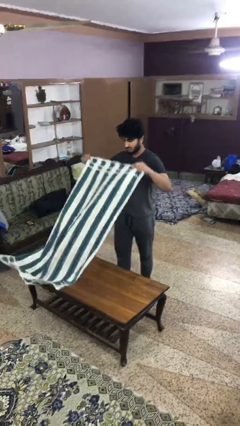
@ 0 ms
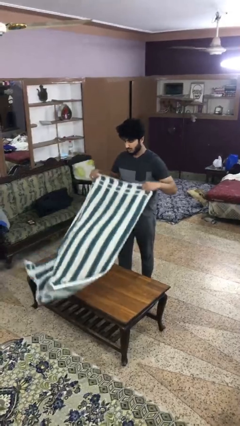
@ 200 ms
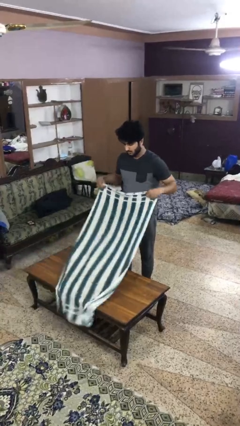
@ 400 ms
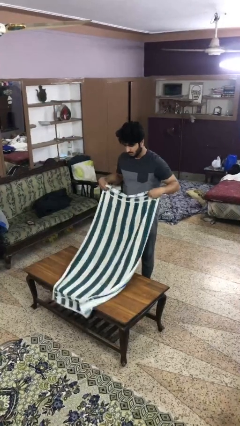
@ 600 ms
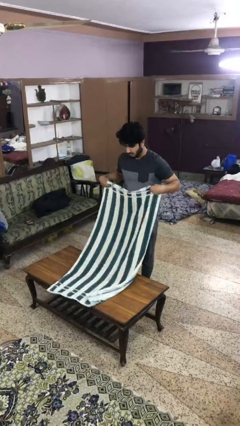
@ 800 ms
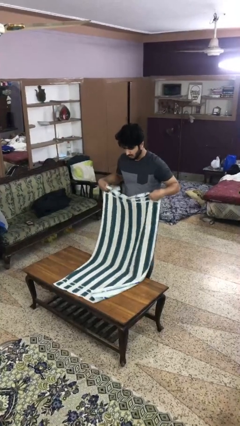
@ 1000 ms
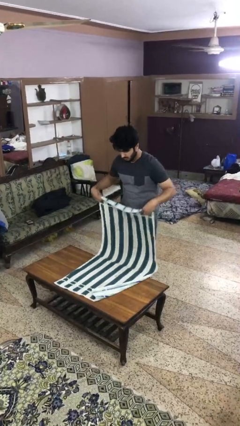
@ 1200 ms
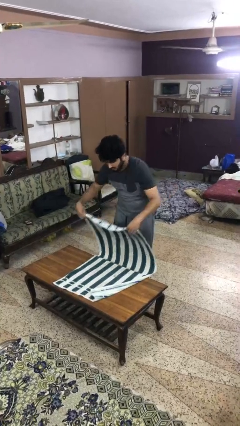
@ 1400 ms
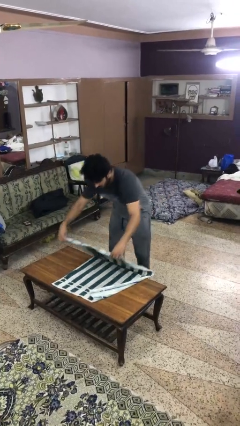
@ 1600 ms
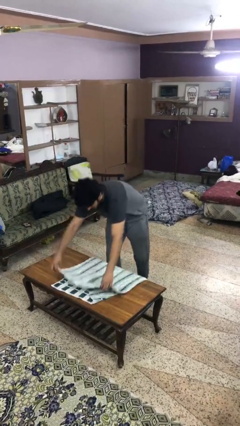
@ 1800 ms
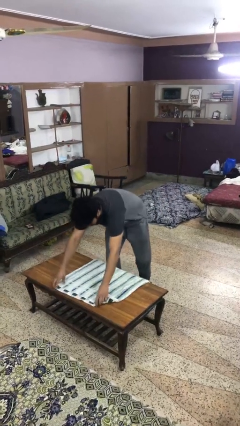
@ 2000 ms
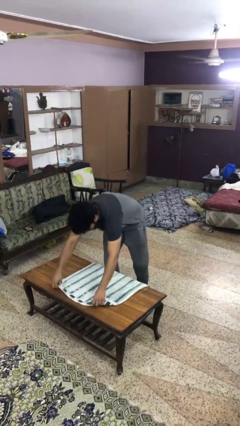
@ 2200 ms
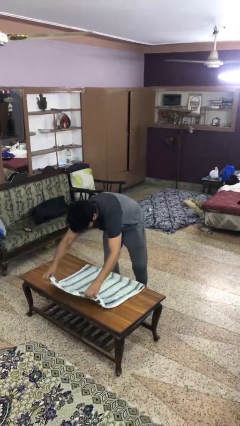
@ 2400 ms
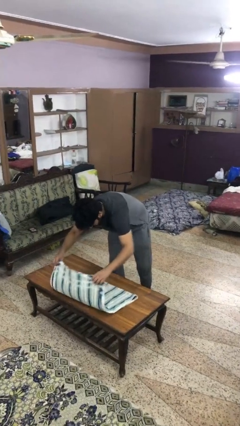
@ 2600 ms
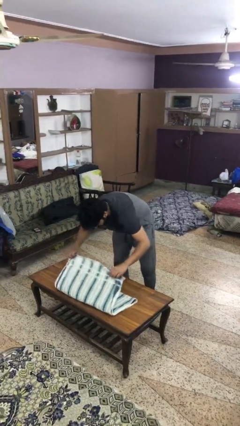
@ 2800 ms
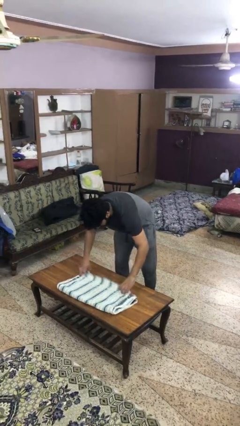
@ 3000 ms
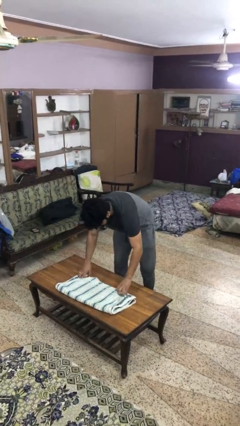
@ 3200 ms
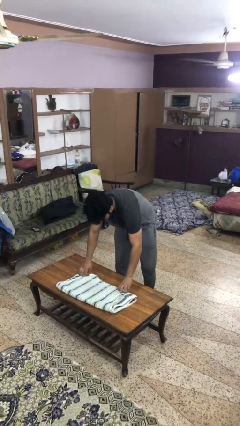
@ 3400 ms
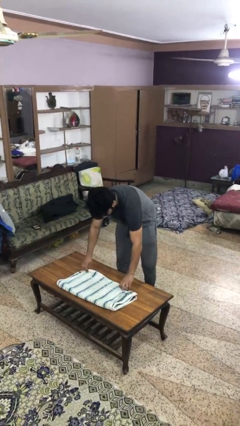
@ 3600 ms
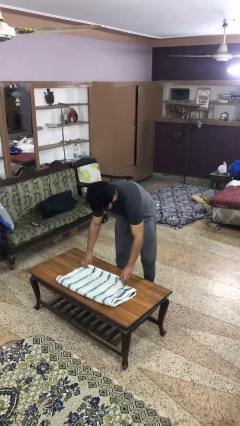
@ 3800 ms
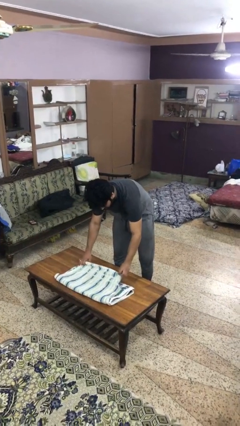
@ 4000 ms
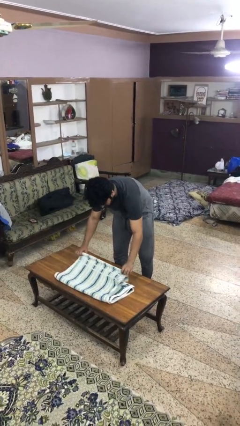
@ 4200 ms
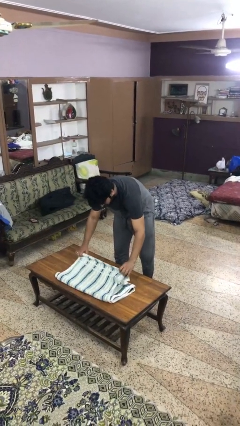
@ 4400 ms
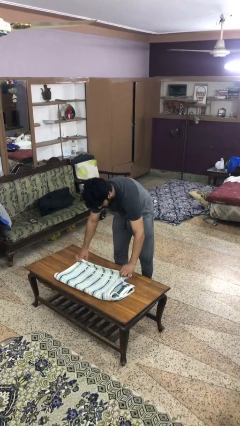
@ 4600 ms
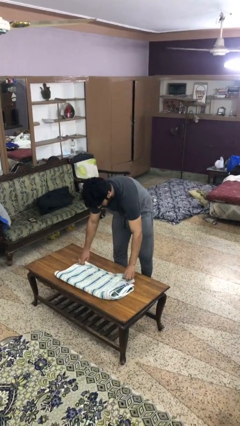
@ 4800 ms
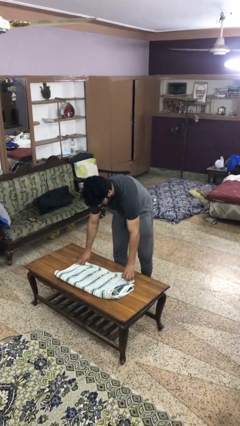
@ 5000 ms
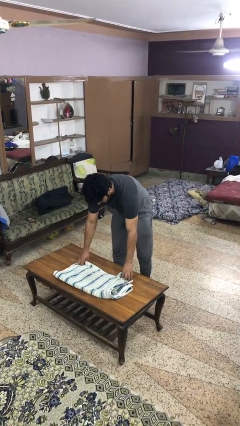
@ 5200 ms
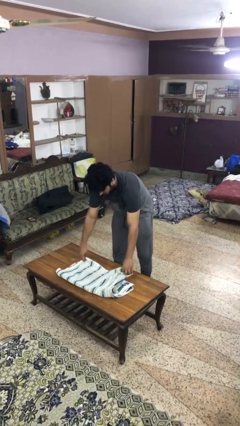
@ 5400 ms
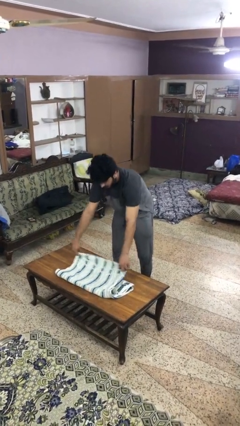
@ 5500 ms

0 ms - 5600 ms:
person folds towel

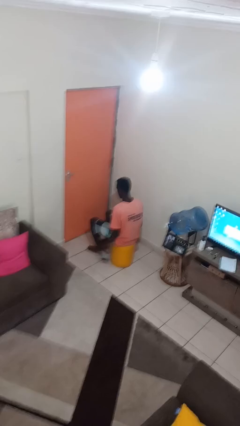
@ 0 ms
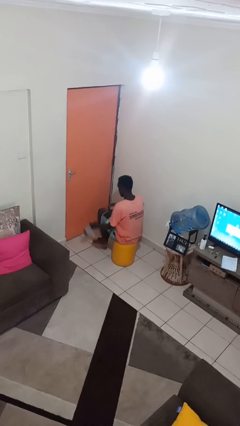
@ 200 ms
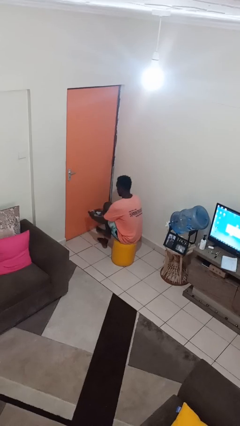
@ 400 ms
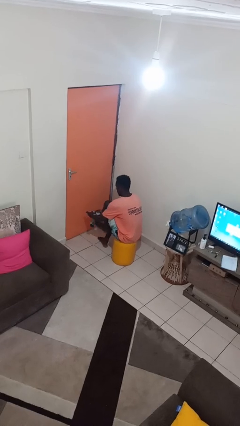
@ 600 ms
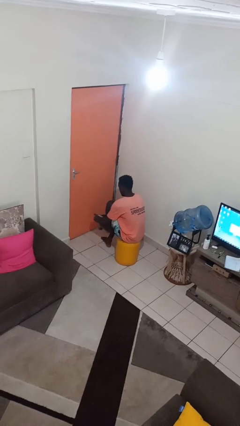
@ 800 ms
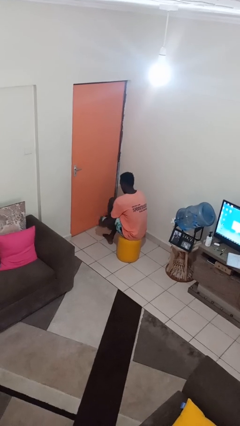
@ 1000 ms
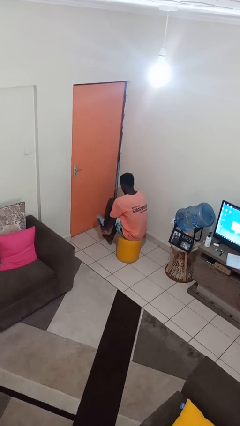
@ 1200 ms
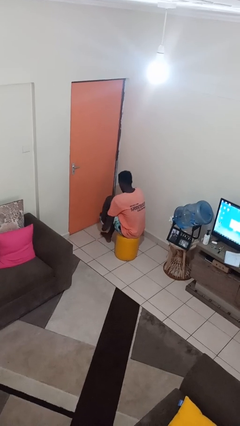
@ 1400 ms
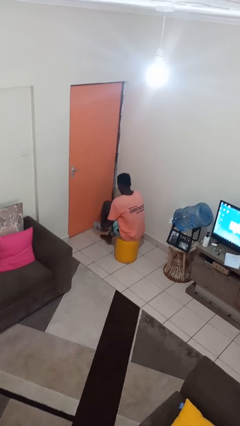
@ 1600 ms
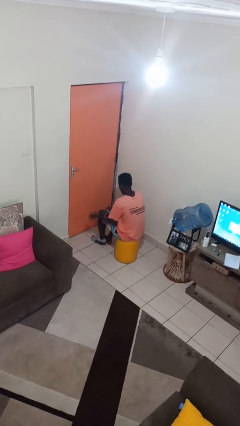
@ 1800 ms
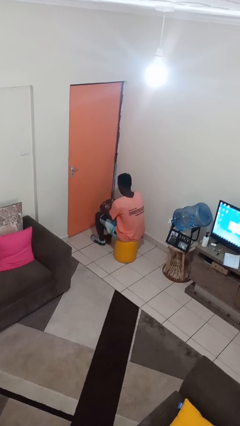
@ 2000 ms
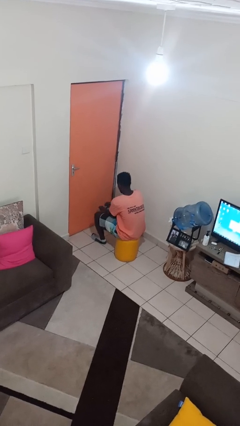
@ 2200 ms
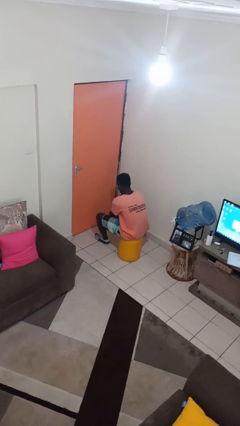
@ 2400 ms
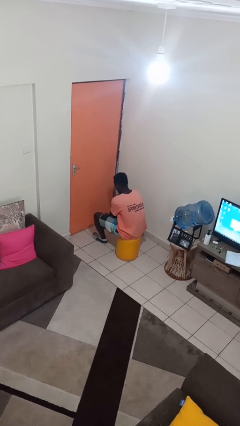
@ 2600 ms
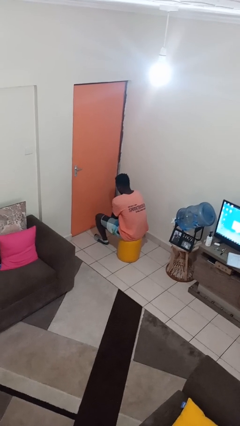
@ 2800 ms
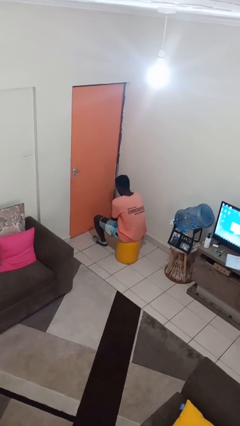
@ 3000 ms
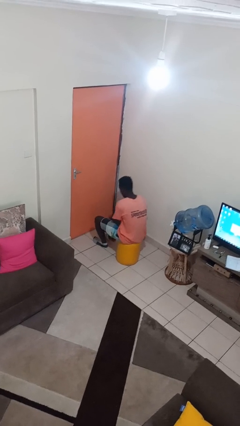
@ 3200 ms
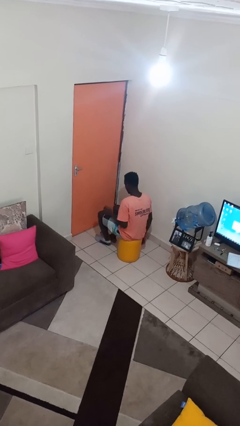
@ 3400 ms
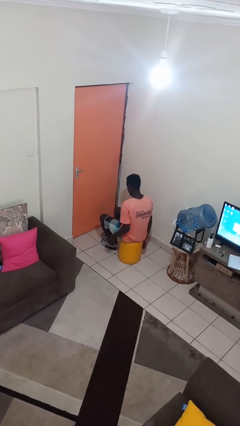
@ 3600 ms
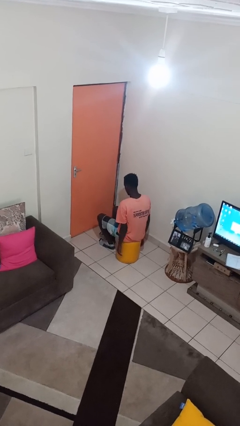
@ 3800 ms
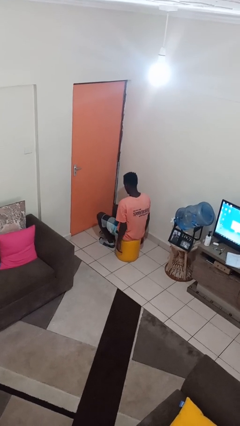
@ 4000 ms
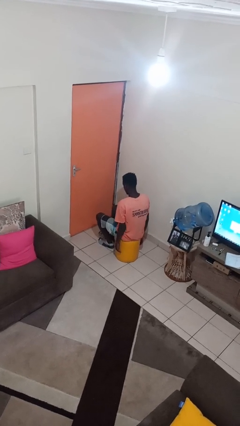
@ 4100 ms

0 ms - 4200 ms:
person puts on socks

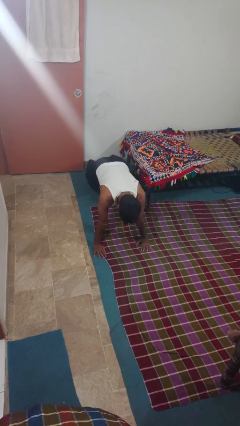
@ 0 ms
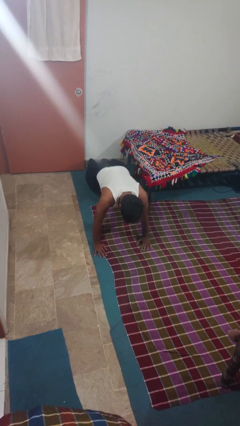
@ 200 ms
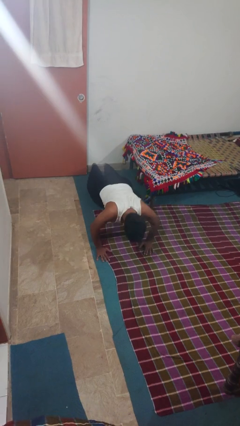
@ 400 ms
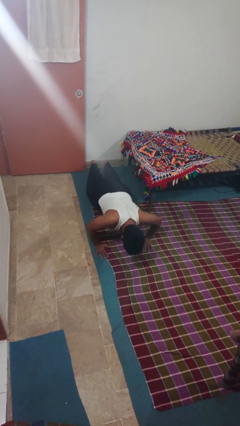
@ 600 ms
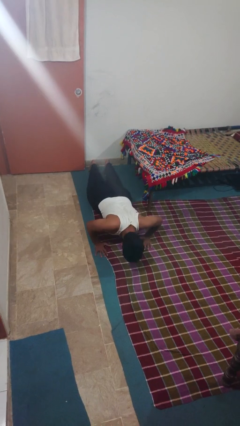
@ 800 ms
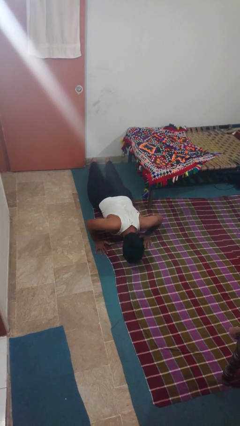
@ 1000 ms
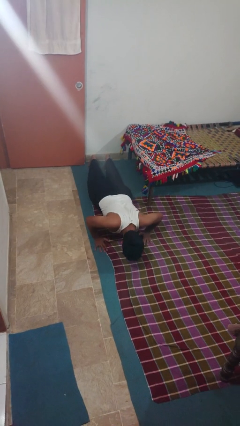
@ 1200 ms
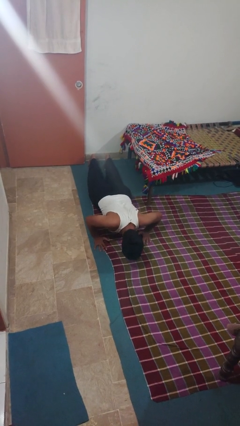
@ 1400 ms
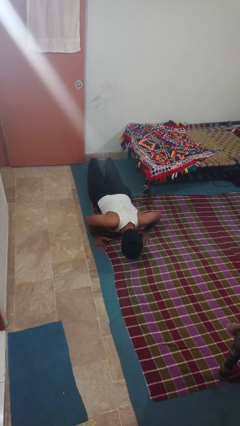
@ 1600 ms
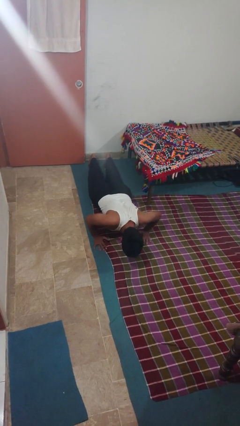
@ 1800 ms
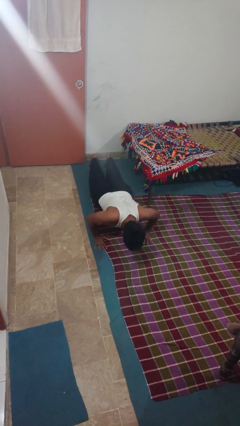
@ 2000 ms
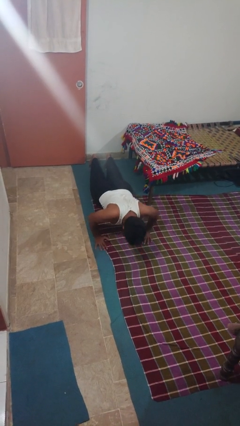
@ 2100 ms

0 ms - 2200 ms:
person exercises with pushup

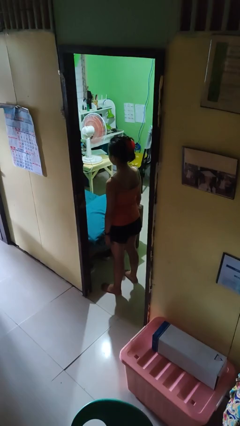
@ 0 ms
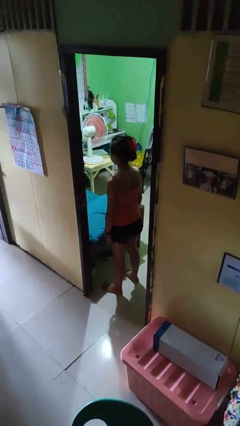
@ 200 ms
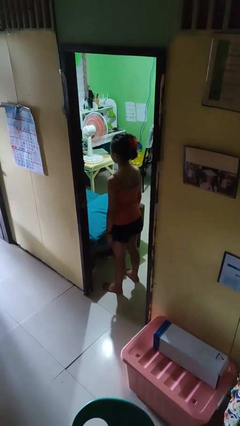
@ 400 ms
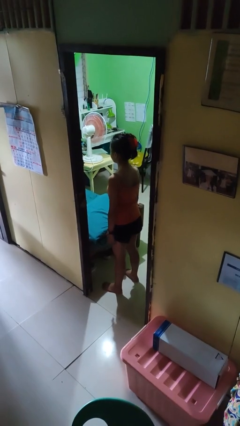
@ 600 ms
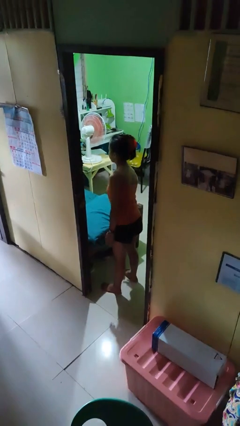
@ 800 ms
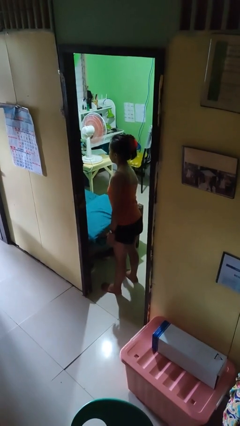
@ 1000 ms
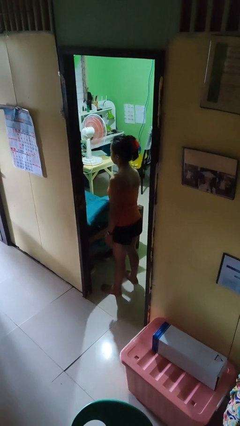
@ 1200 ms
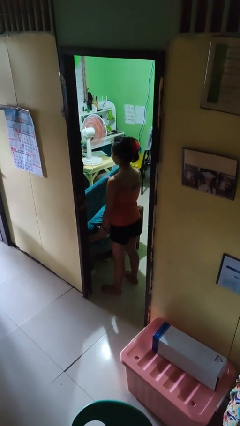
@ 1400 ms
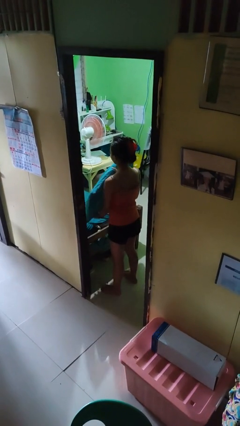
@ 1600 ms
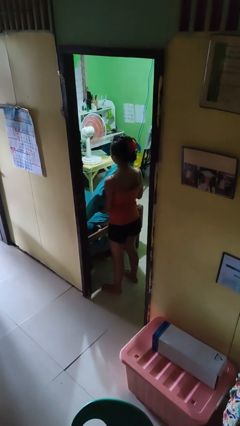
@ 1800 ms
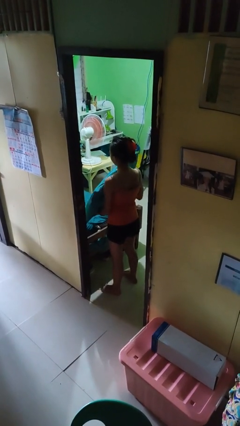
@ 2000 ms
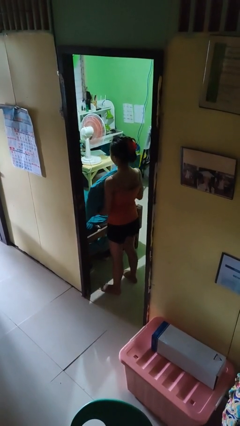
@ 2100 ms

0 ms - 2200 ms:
person picks up object from bed

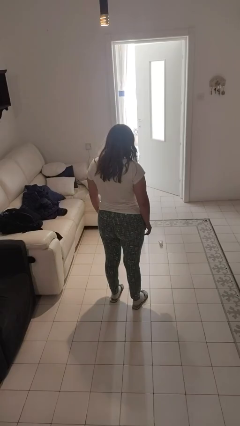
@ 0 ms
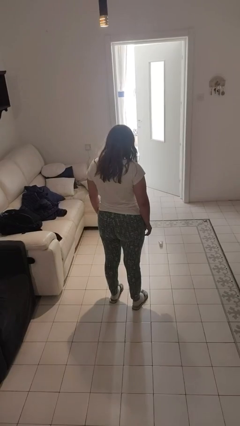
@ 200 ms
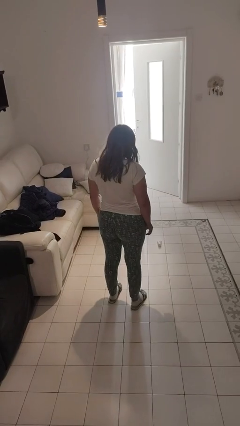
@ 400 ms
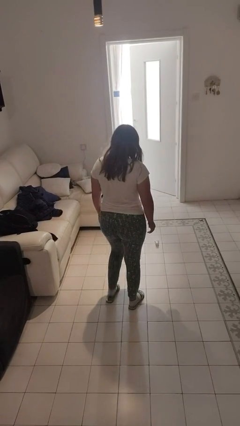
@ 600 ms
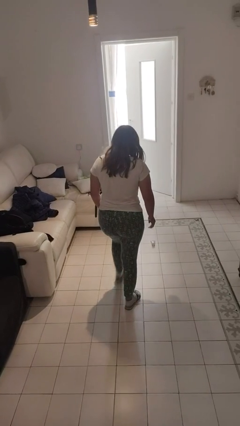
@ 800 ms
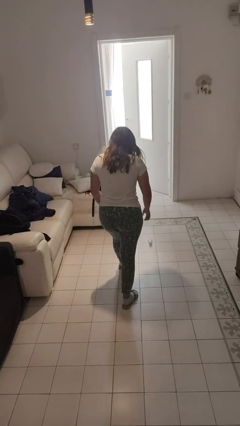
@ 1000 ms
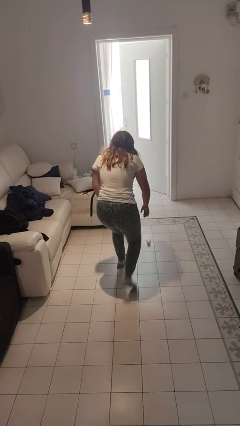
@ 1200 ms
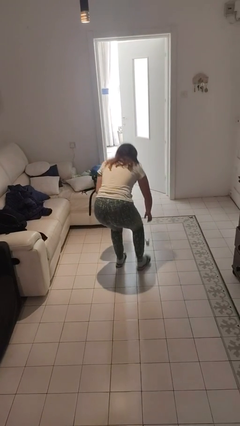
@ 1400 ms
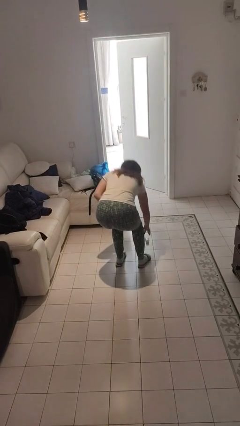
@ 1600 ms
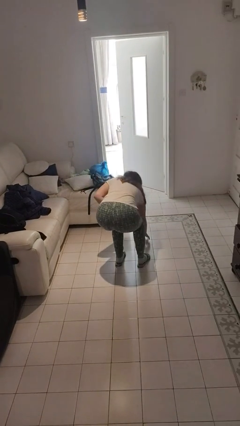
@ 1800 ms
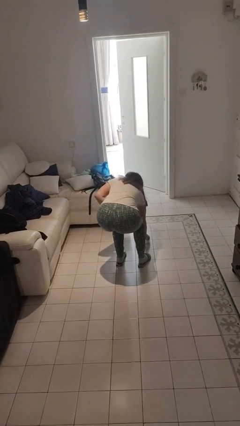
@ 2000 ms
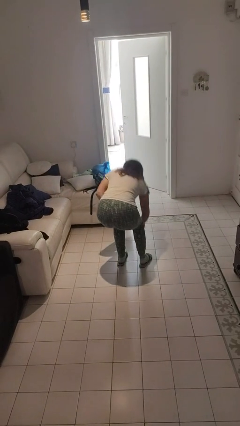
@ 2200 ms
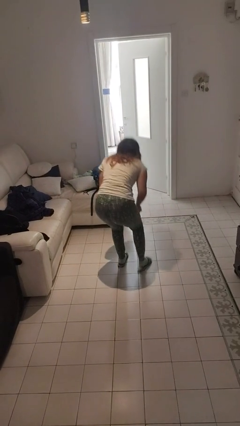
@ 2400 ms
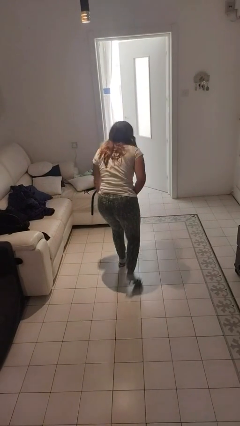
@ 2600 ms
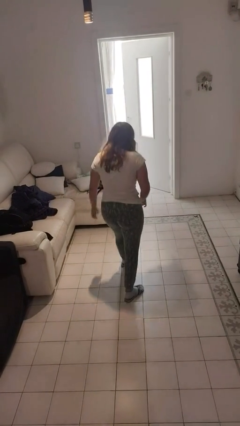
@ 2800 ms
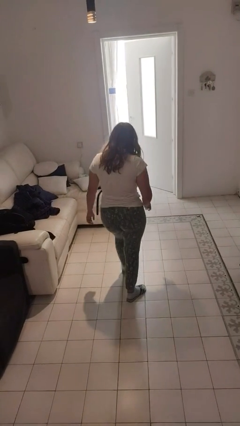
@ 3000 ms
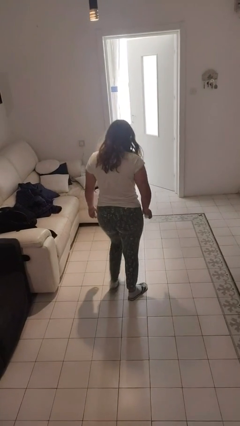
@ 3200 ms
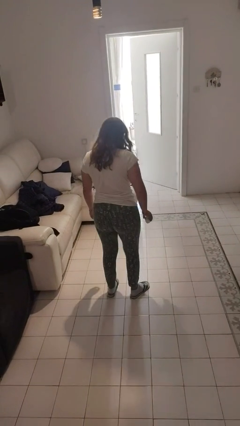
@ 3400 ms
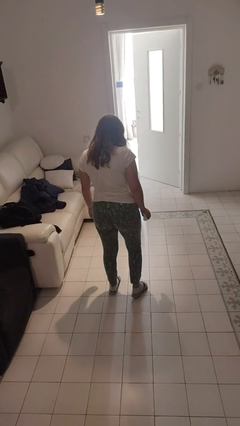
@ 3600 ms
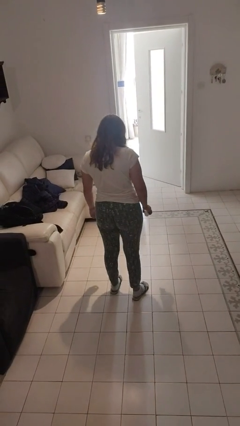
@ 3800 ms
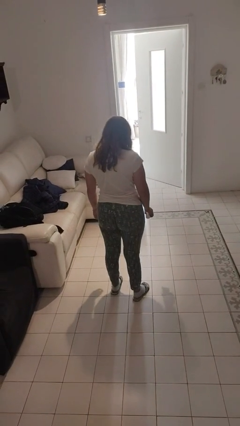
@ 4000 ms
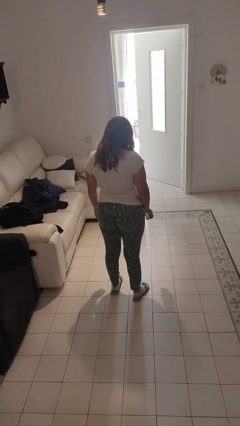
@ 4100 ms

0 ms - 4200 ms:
person picks up object from floor
